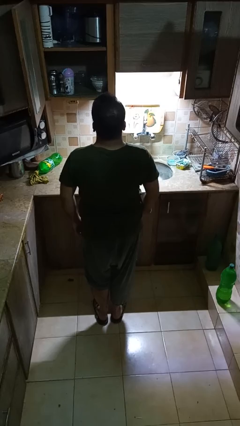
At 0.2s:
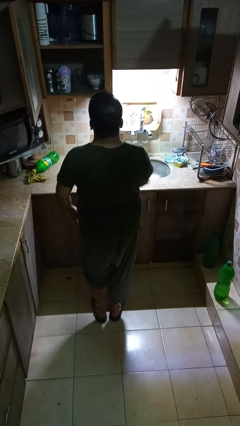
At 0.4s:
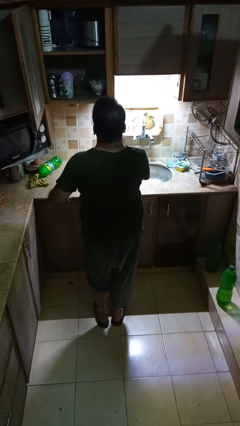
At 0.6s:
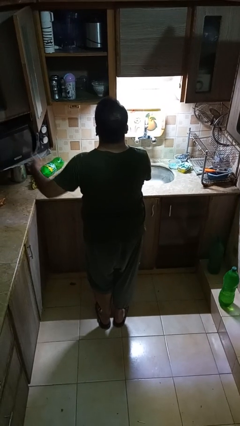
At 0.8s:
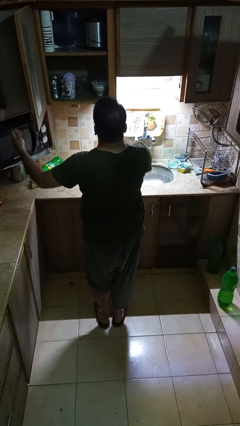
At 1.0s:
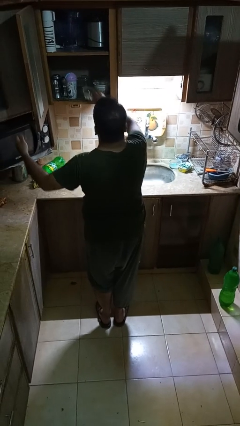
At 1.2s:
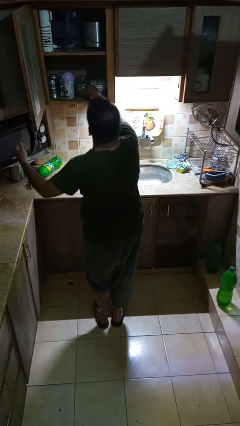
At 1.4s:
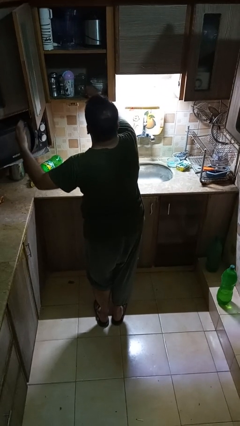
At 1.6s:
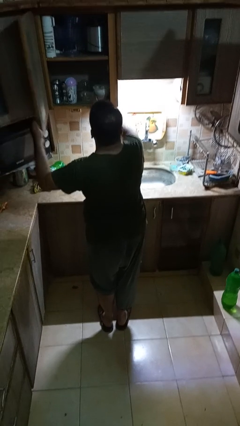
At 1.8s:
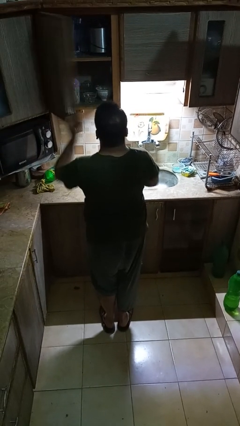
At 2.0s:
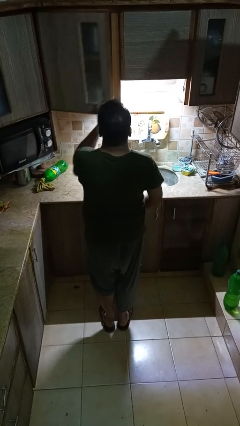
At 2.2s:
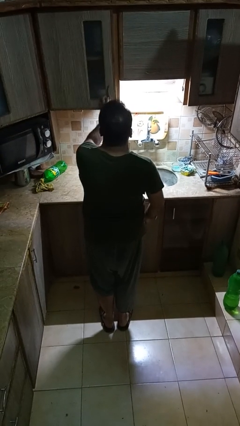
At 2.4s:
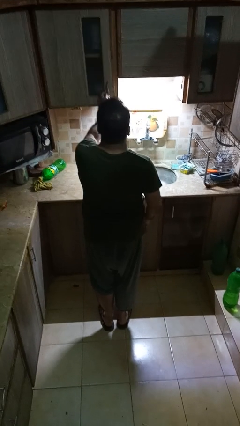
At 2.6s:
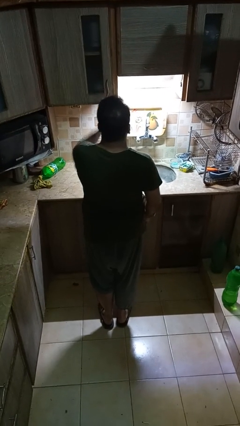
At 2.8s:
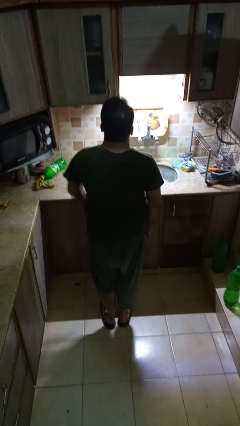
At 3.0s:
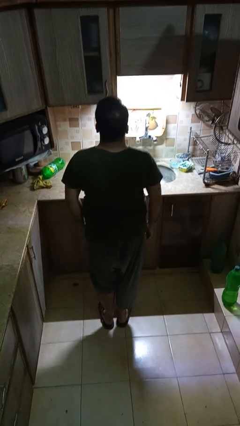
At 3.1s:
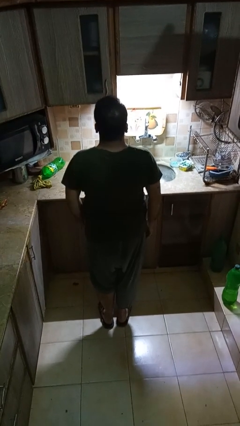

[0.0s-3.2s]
person puts object in cabinet

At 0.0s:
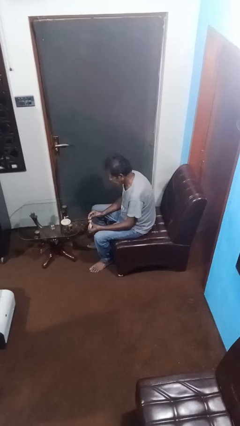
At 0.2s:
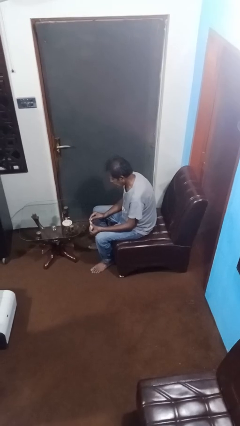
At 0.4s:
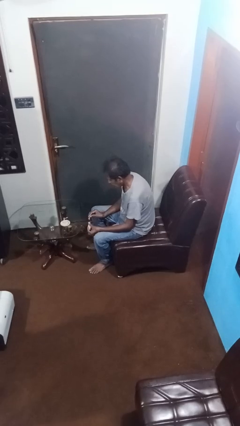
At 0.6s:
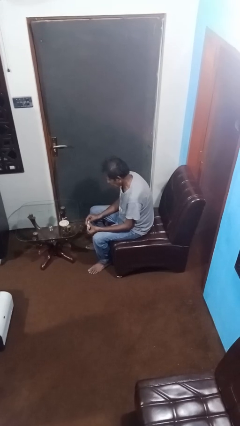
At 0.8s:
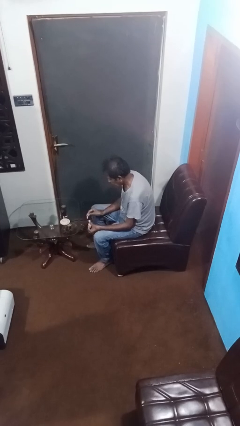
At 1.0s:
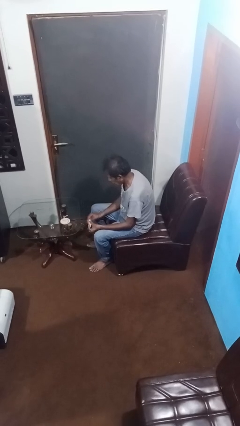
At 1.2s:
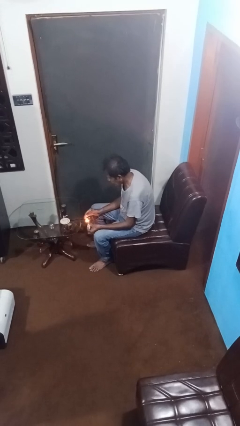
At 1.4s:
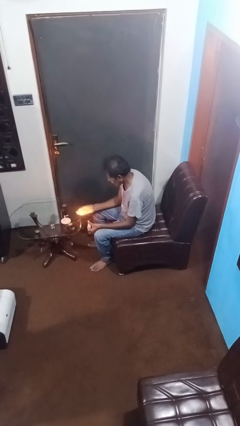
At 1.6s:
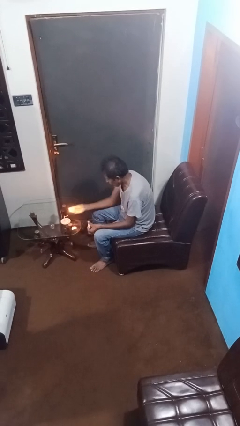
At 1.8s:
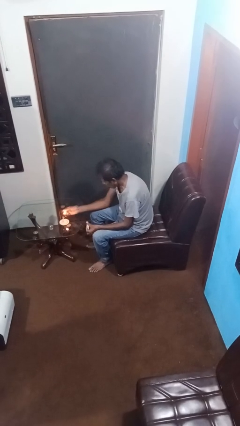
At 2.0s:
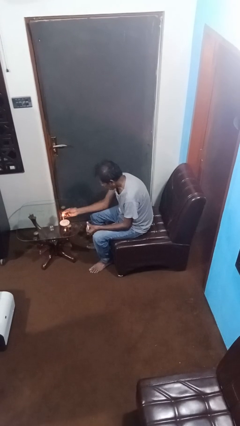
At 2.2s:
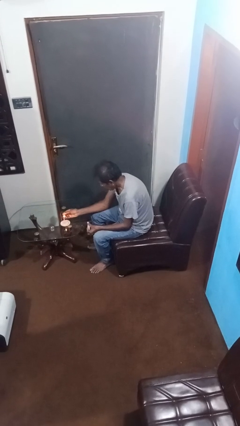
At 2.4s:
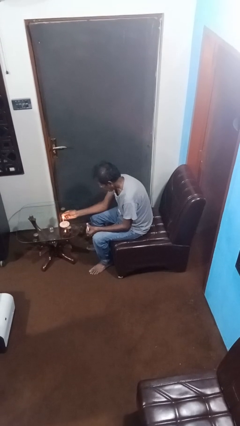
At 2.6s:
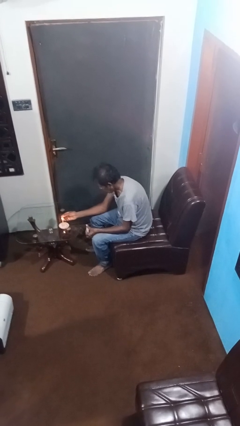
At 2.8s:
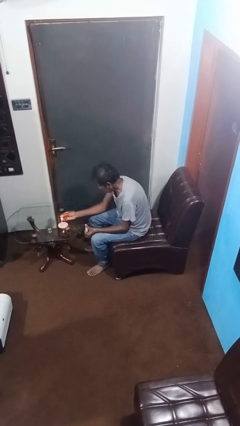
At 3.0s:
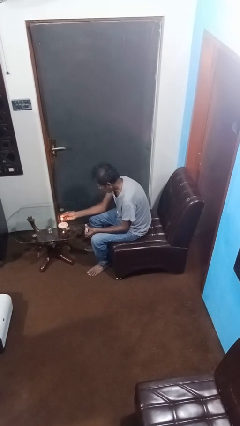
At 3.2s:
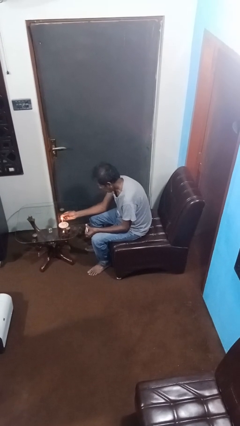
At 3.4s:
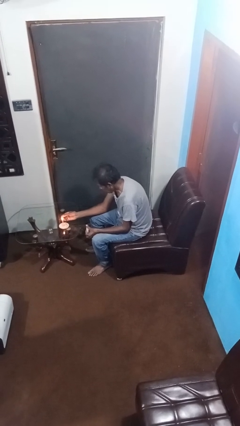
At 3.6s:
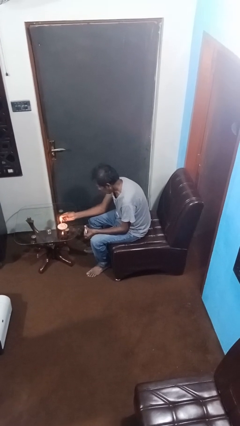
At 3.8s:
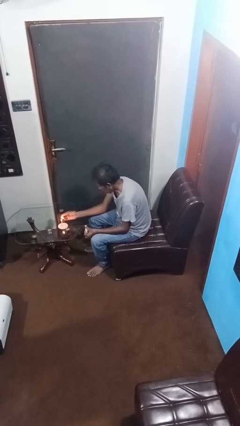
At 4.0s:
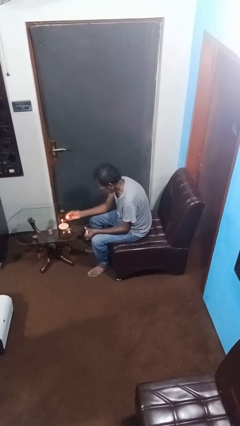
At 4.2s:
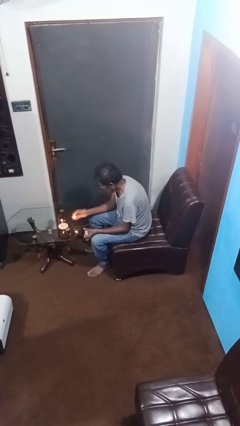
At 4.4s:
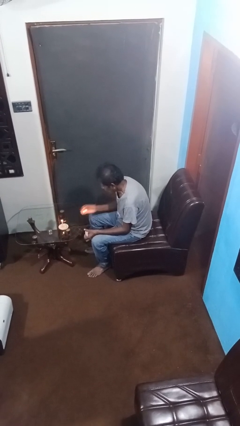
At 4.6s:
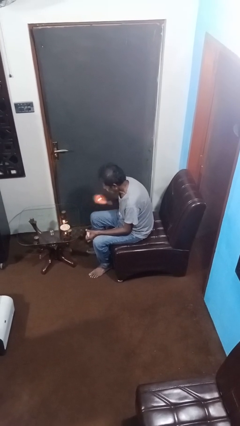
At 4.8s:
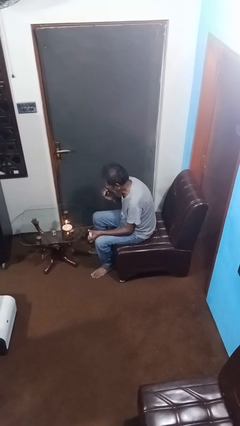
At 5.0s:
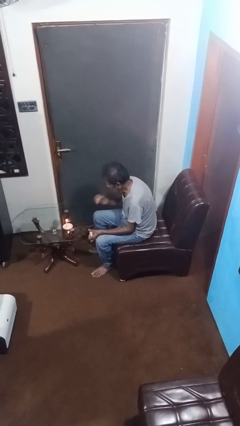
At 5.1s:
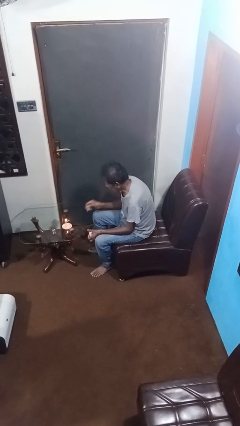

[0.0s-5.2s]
person lights candle

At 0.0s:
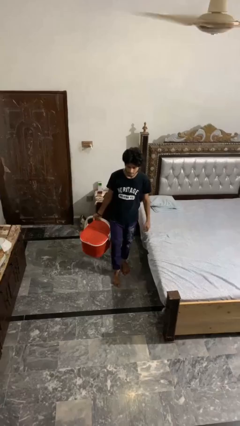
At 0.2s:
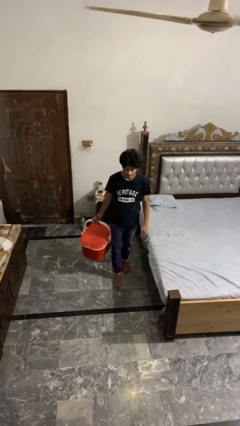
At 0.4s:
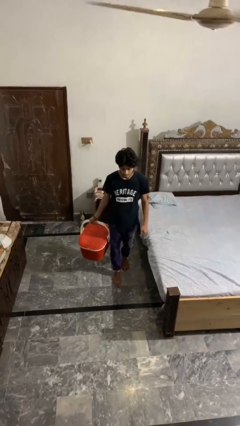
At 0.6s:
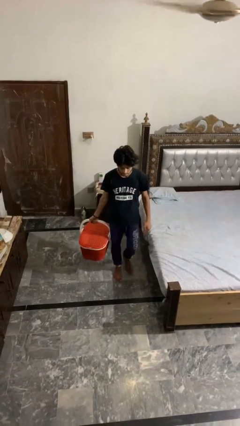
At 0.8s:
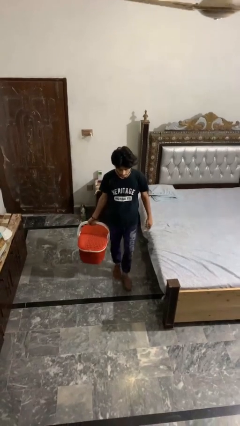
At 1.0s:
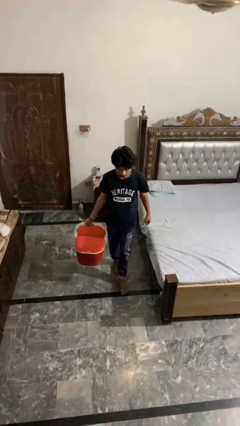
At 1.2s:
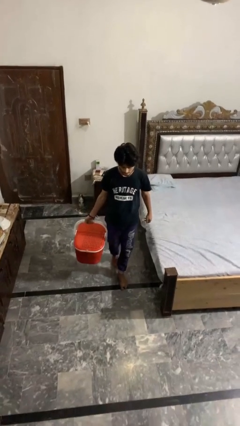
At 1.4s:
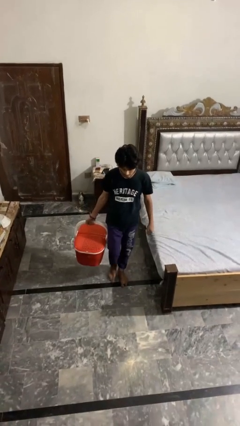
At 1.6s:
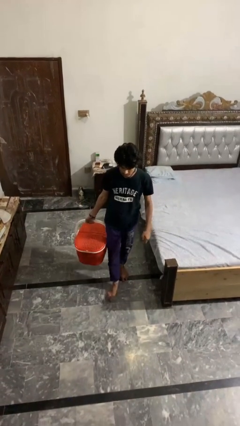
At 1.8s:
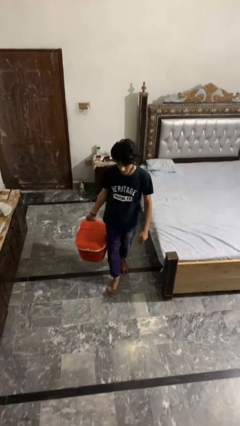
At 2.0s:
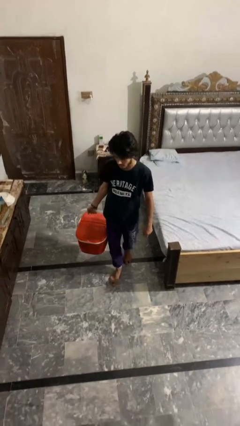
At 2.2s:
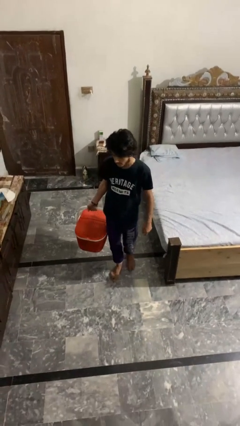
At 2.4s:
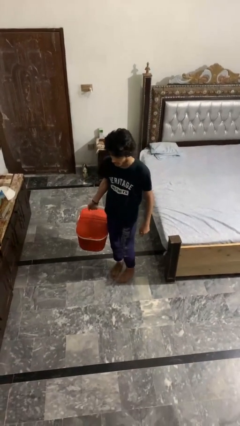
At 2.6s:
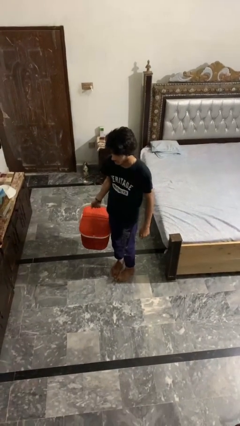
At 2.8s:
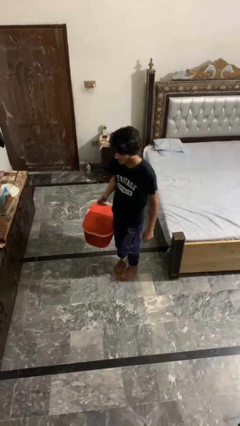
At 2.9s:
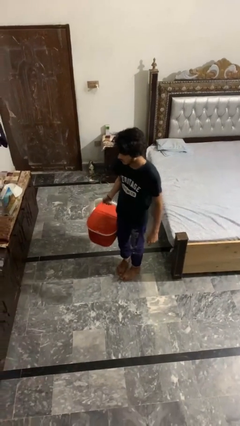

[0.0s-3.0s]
person carries laundry basket

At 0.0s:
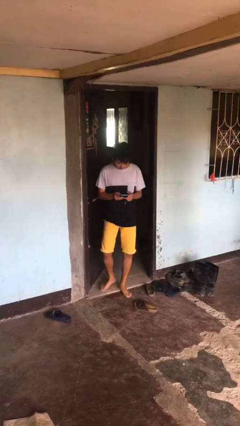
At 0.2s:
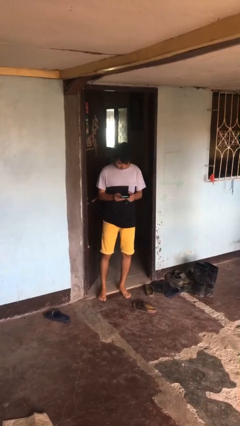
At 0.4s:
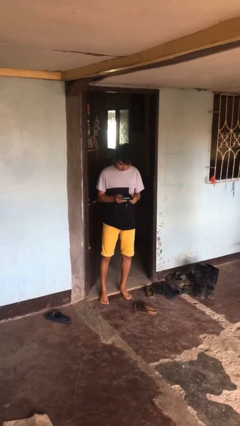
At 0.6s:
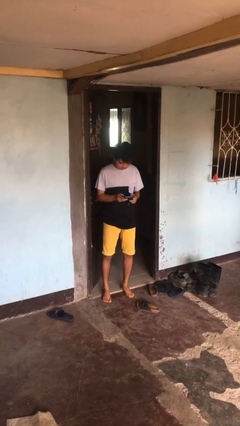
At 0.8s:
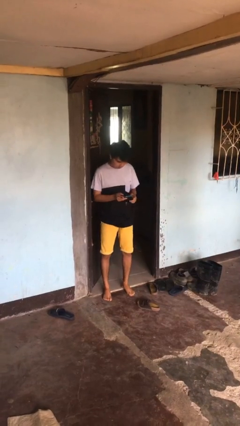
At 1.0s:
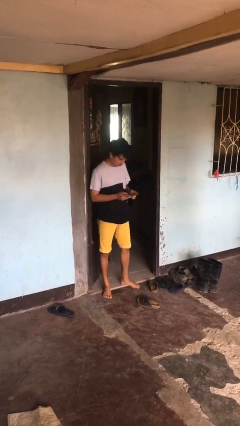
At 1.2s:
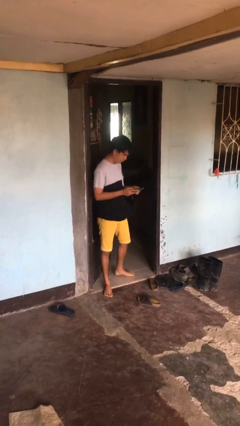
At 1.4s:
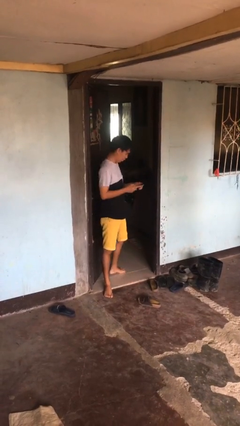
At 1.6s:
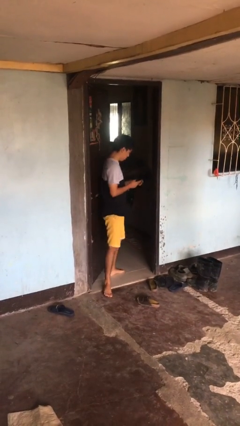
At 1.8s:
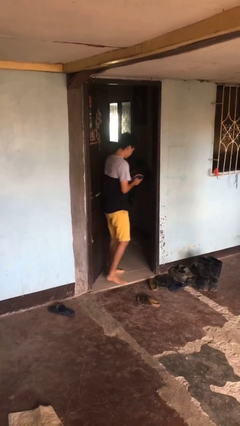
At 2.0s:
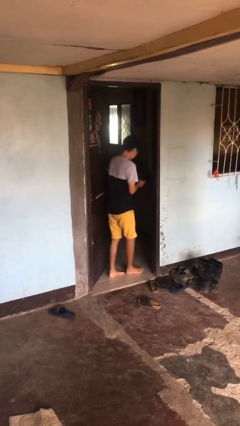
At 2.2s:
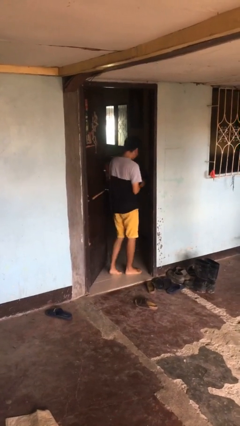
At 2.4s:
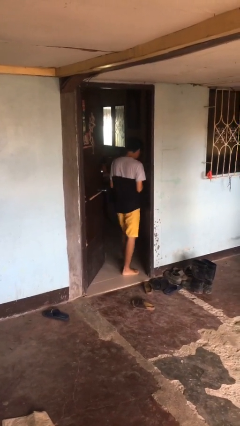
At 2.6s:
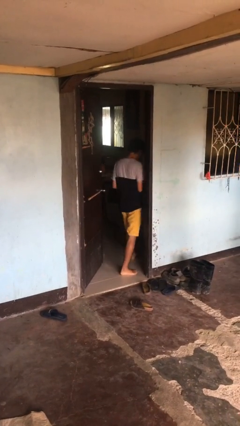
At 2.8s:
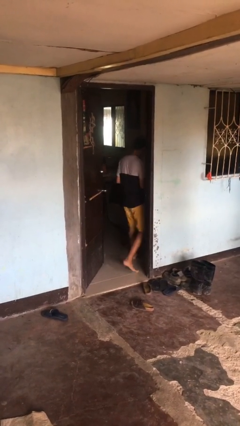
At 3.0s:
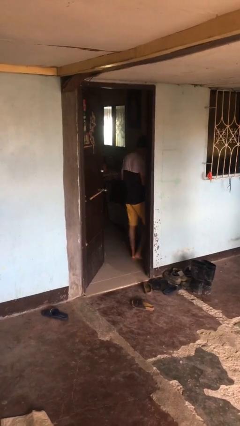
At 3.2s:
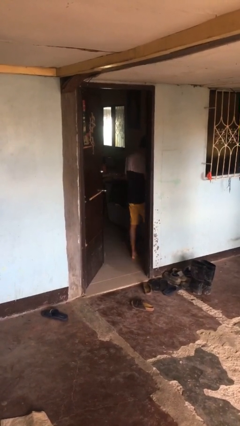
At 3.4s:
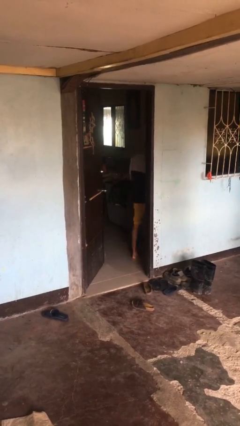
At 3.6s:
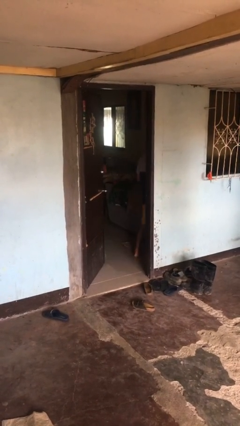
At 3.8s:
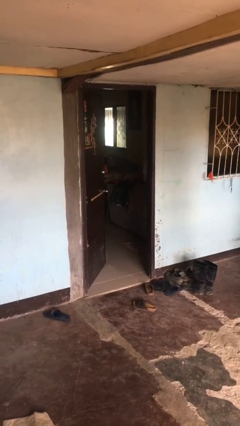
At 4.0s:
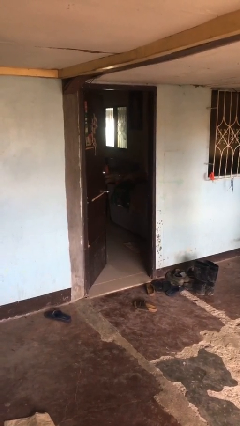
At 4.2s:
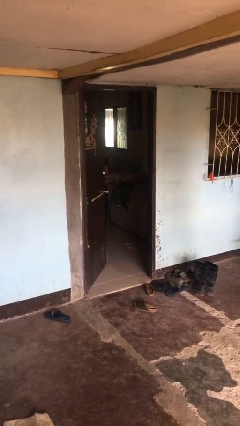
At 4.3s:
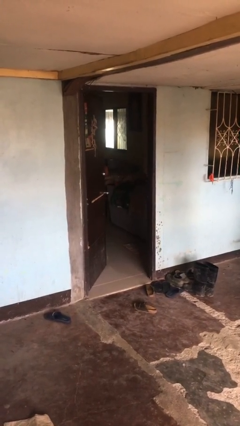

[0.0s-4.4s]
person exits scene through structure

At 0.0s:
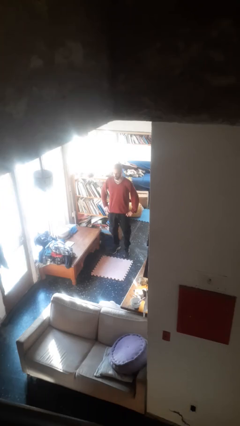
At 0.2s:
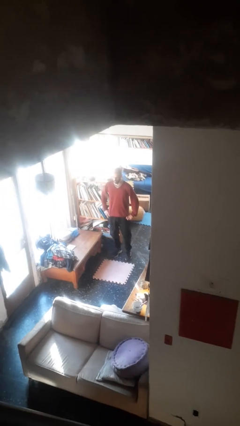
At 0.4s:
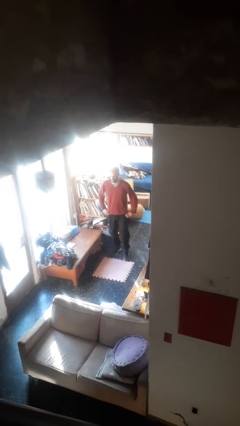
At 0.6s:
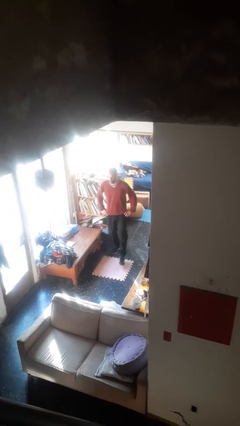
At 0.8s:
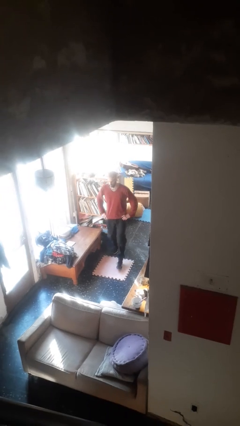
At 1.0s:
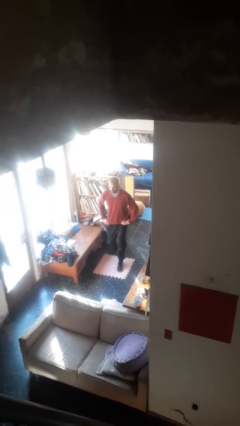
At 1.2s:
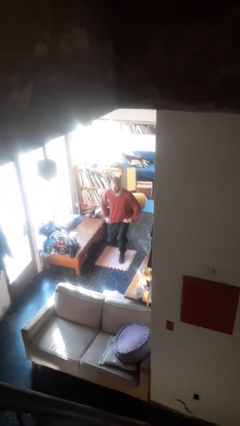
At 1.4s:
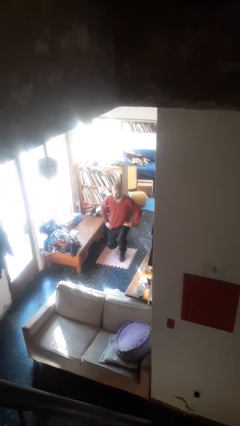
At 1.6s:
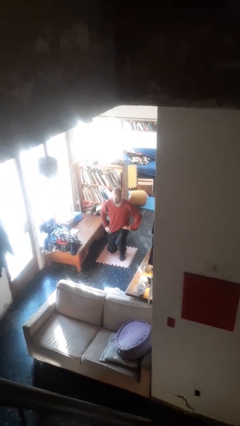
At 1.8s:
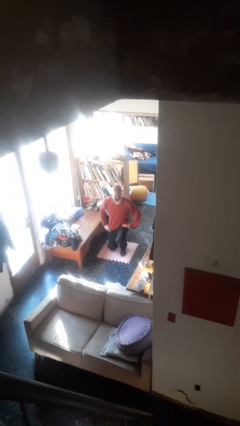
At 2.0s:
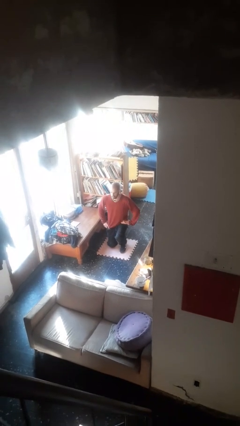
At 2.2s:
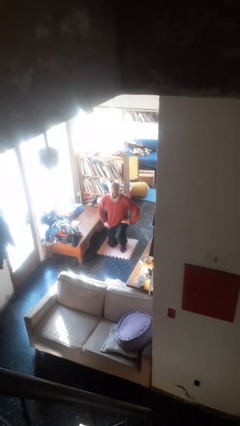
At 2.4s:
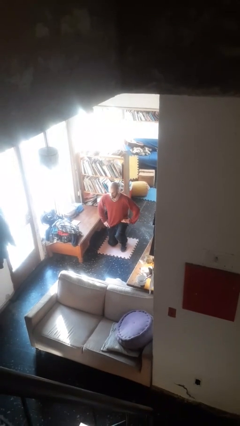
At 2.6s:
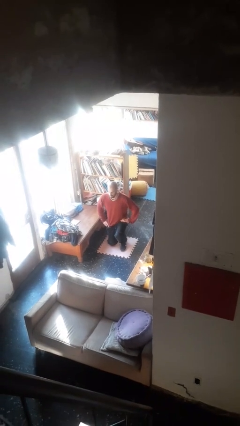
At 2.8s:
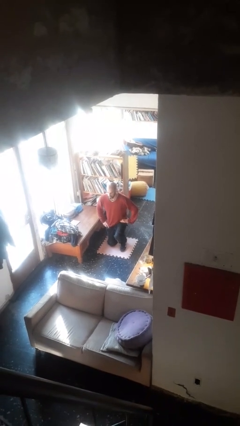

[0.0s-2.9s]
person kneels
